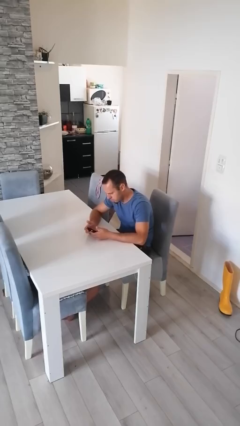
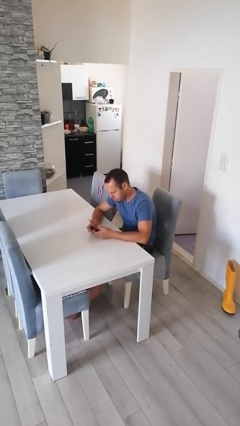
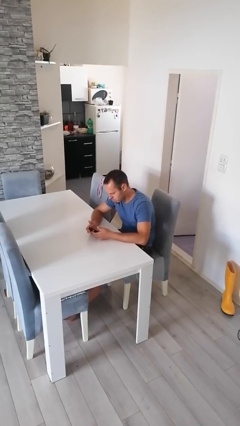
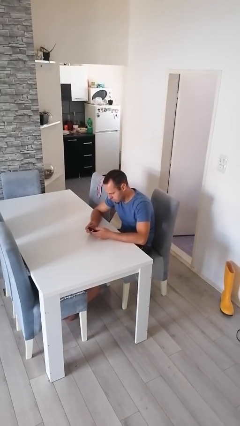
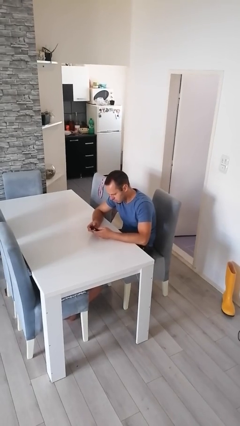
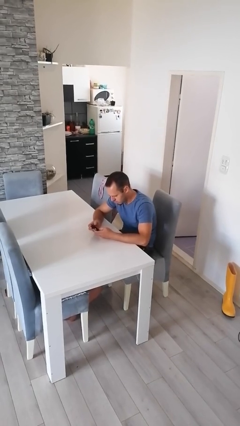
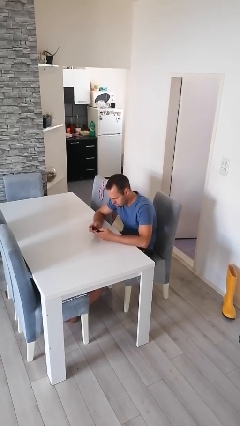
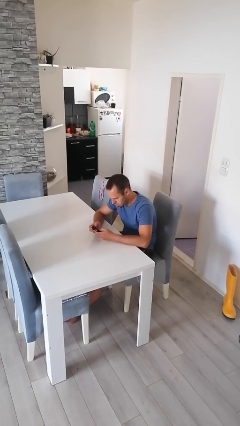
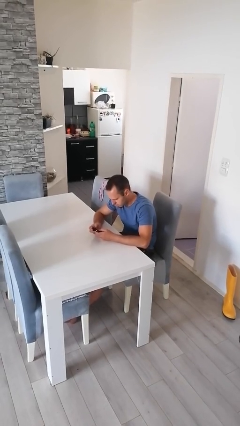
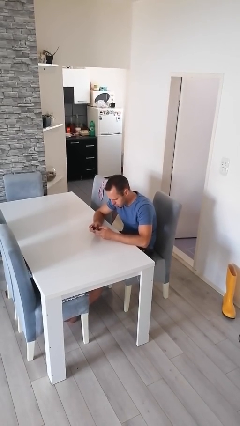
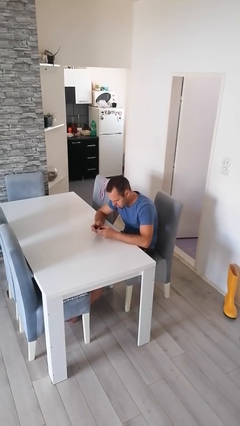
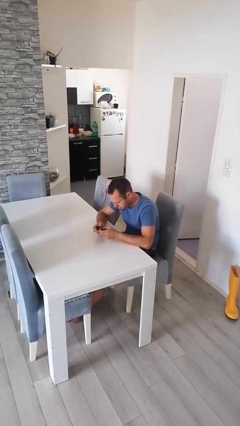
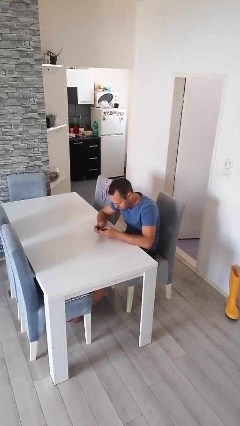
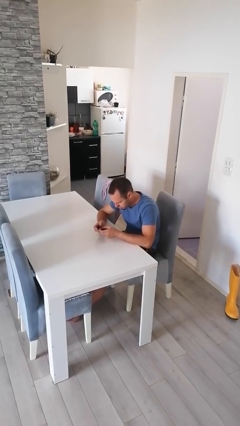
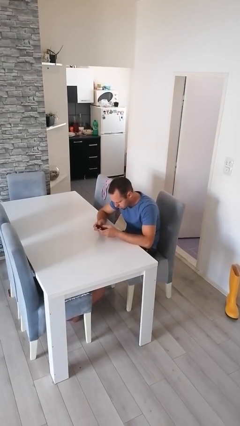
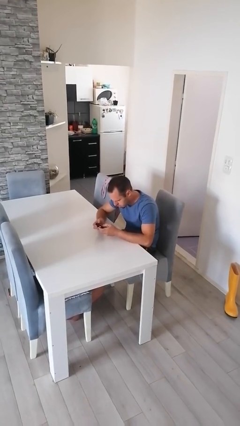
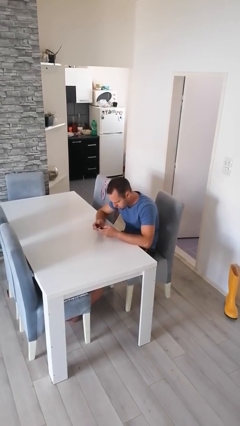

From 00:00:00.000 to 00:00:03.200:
person interacts with handheld game

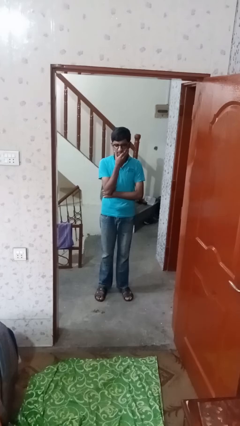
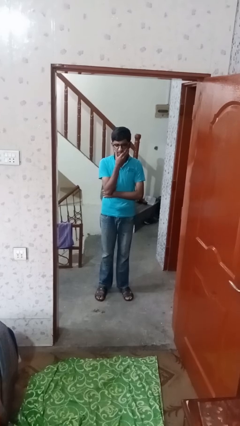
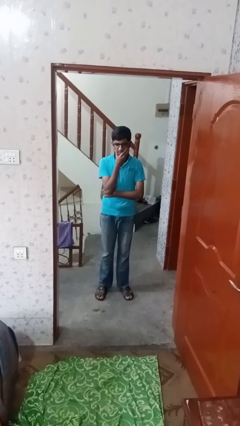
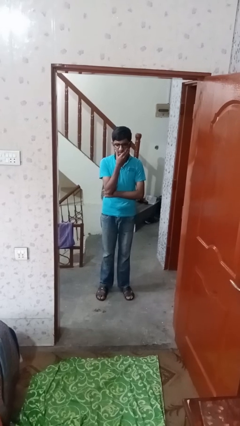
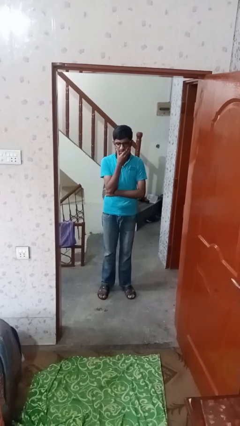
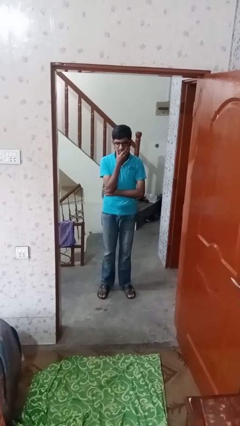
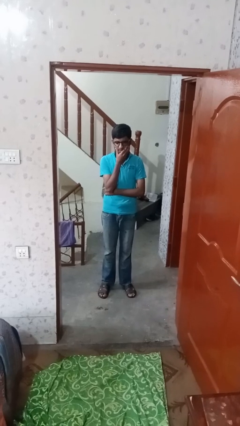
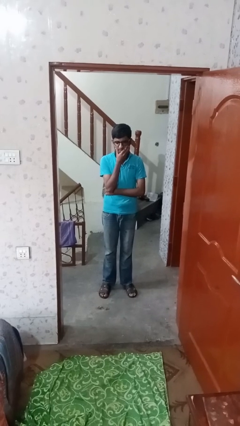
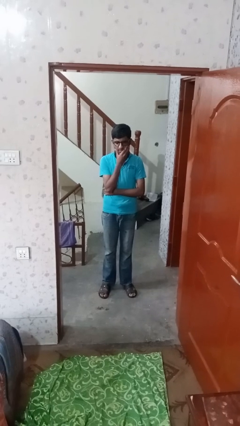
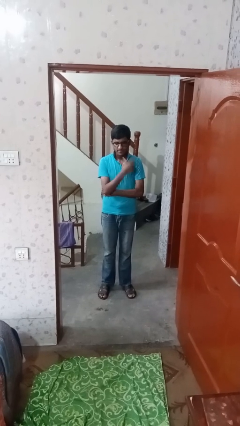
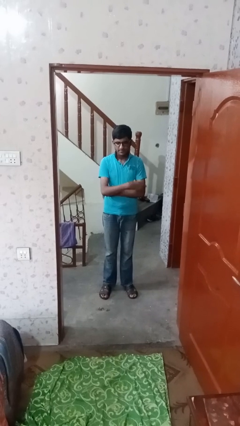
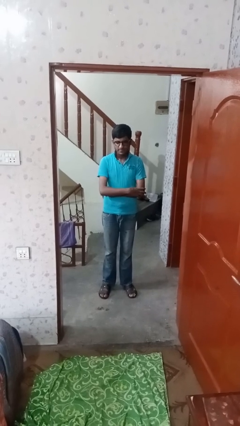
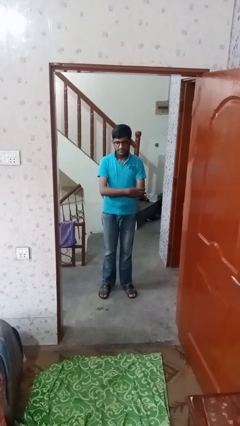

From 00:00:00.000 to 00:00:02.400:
person strokes chin

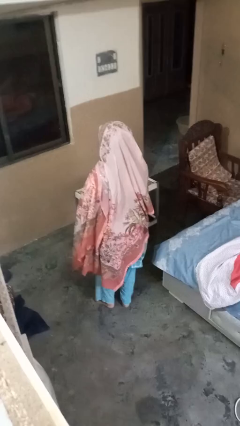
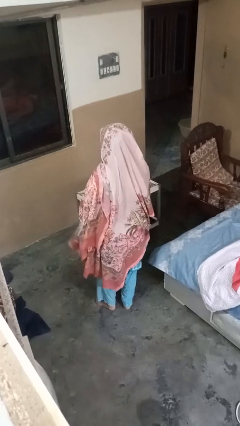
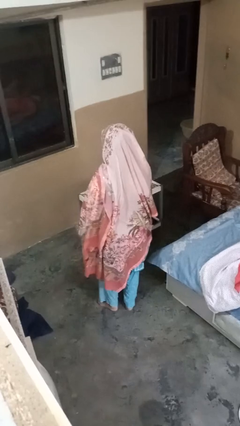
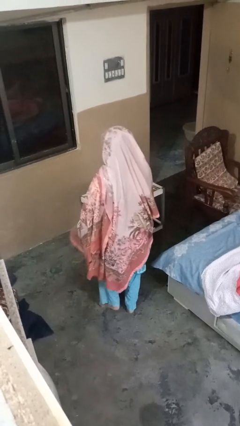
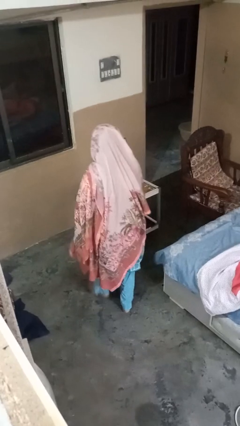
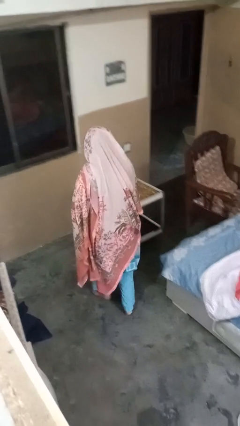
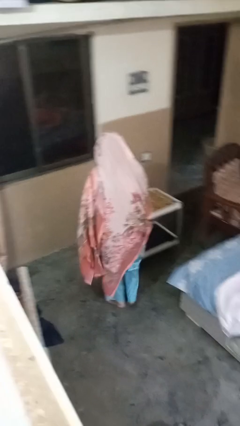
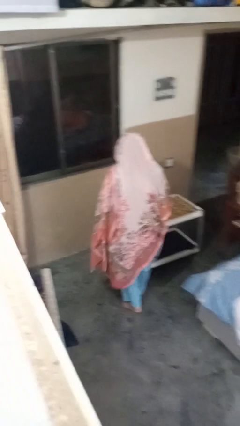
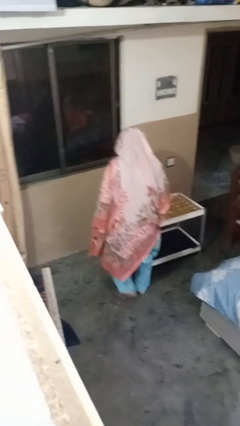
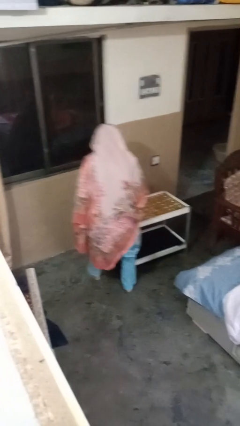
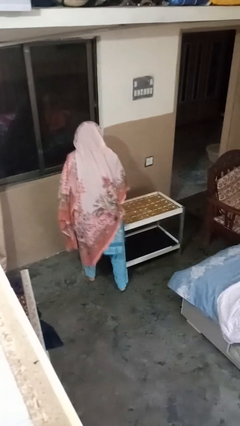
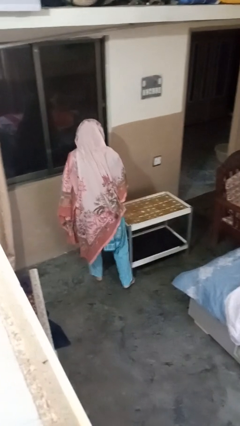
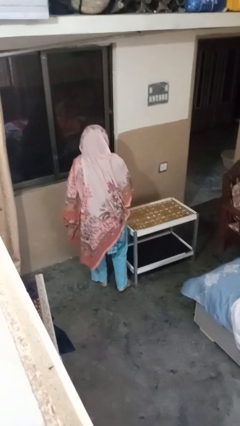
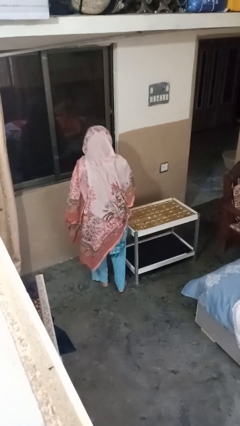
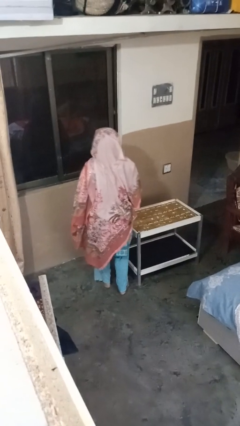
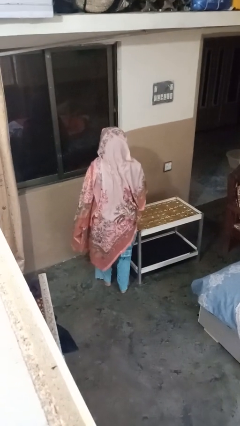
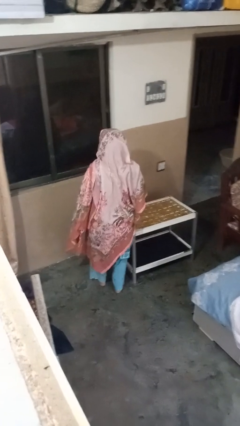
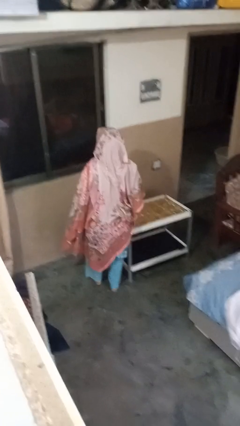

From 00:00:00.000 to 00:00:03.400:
person bumps into table

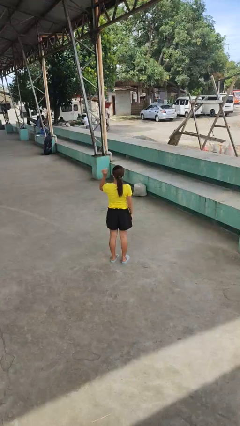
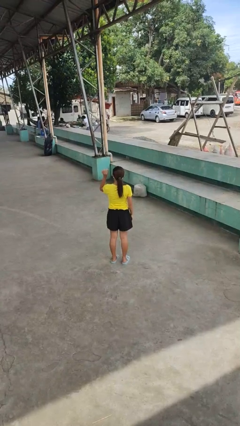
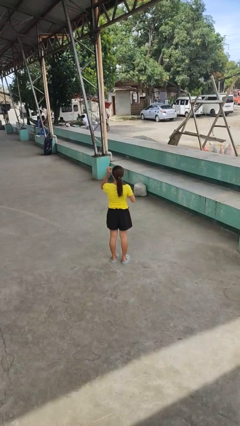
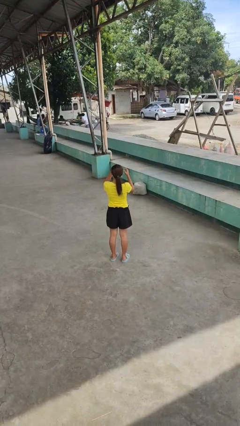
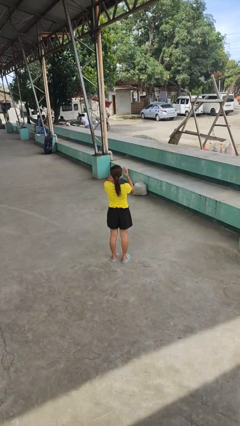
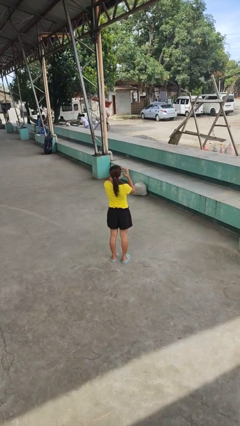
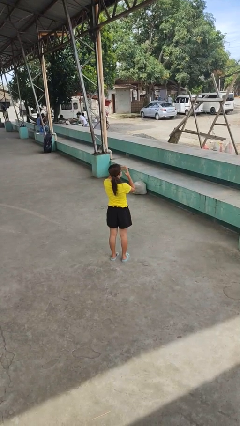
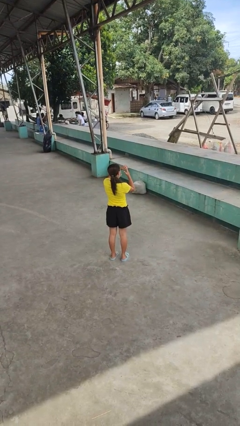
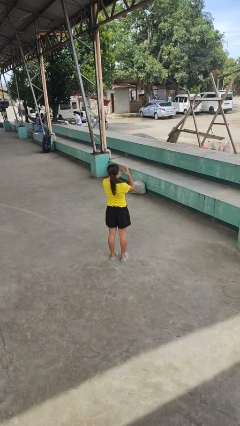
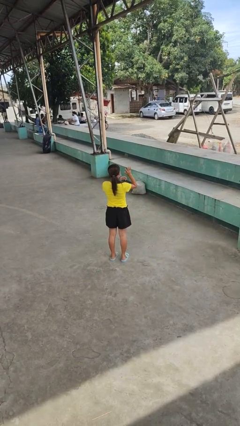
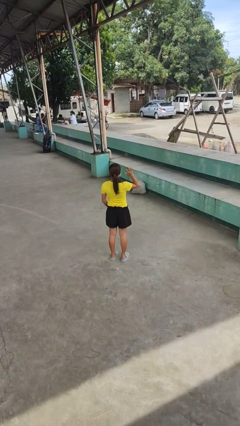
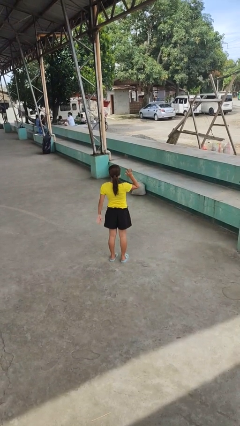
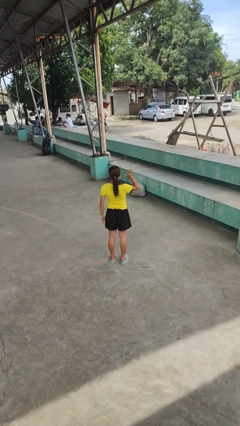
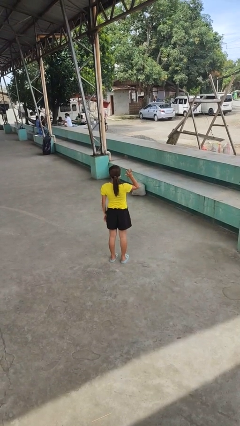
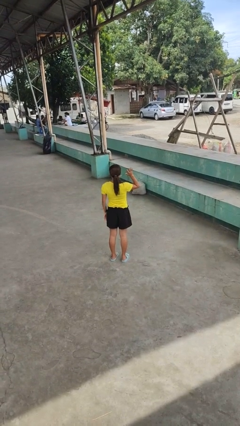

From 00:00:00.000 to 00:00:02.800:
person puts on ring

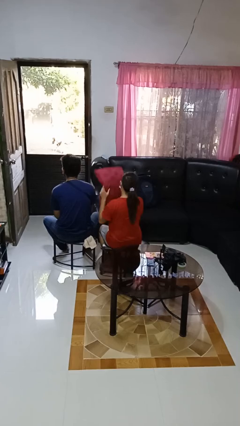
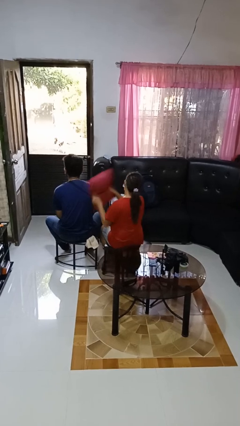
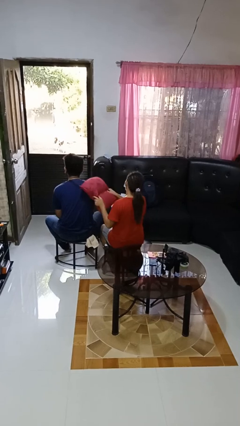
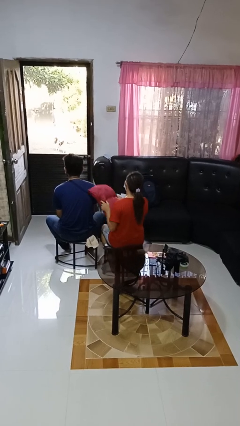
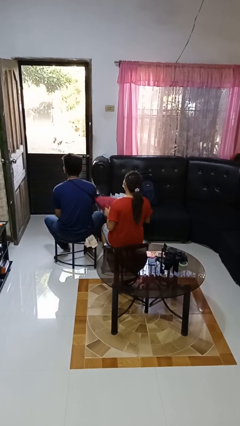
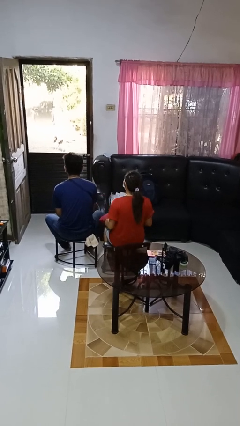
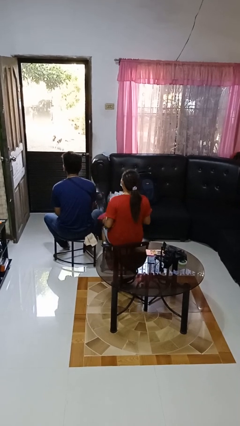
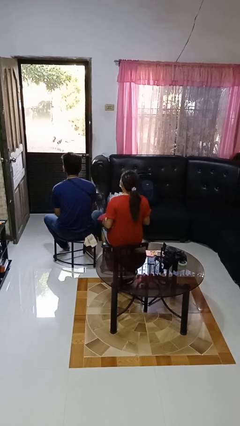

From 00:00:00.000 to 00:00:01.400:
person hits person with pillow

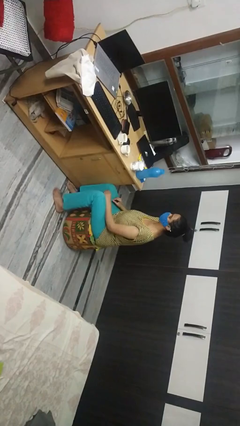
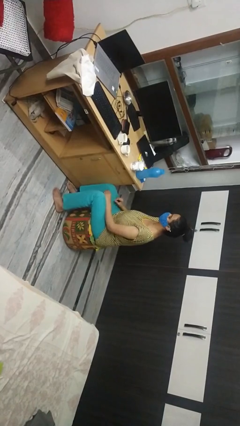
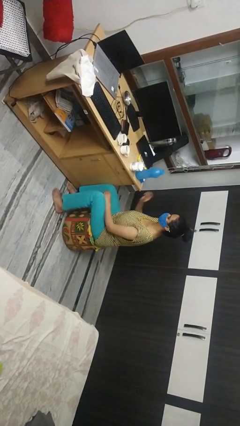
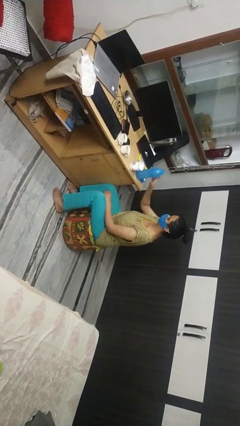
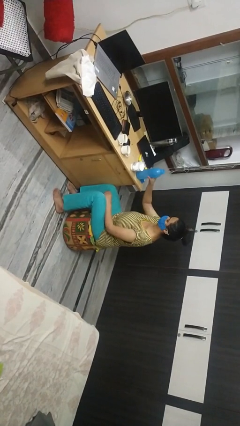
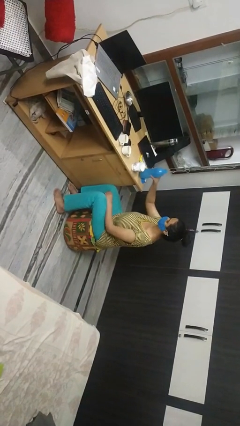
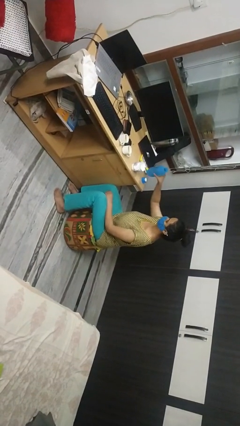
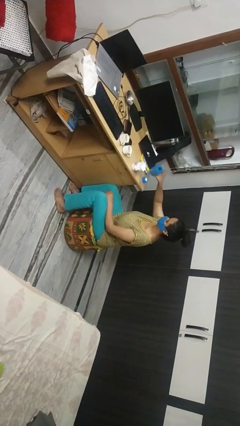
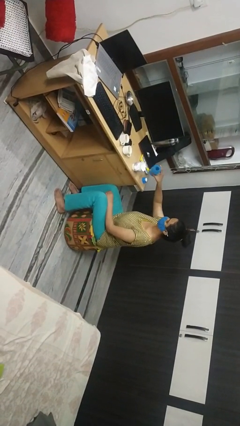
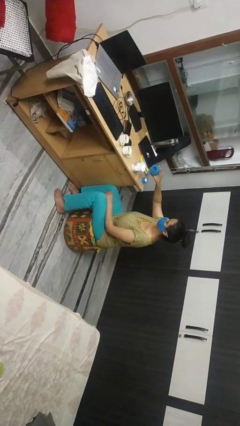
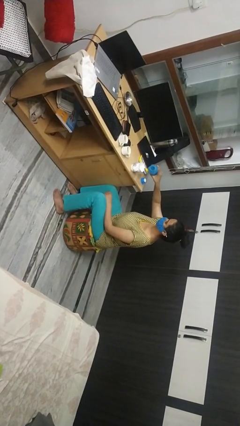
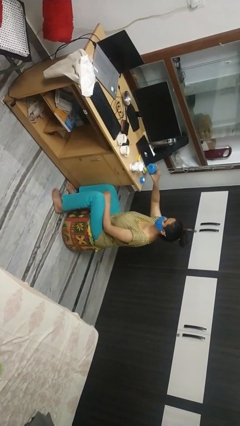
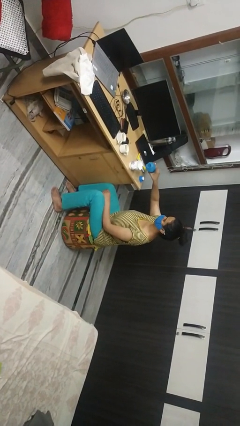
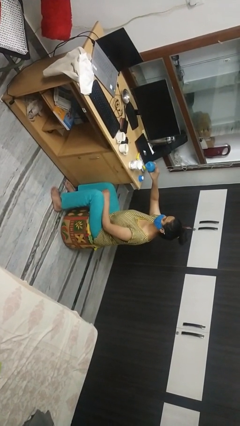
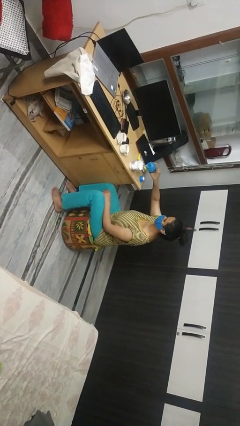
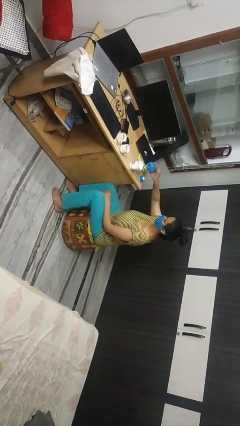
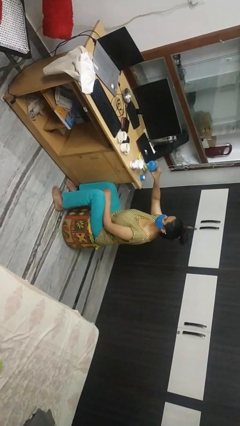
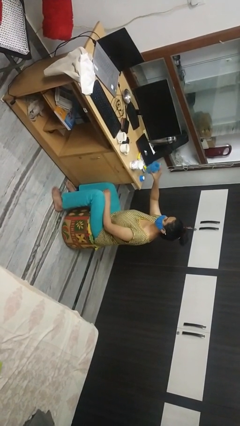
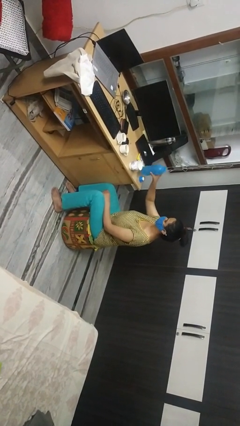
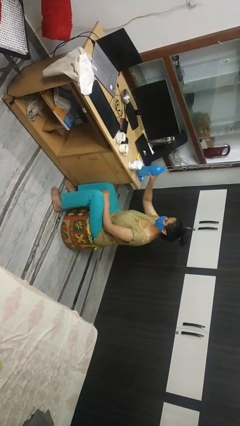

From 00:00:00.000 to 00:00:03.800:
person pours liquid into cup

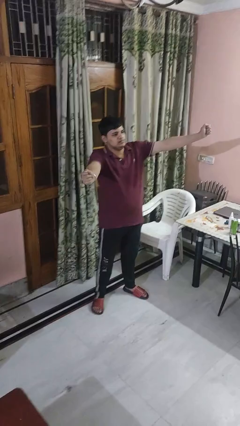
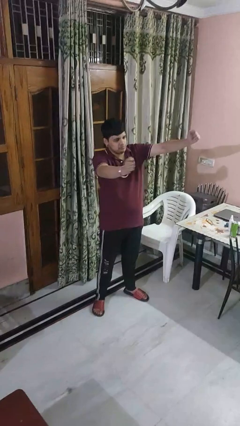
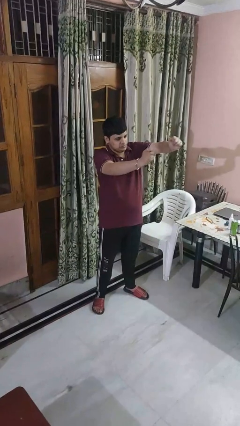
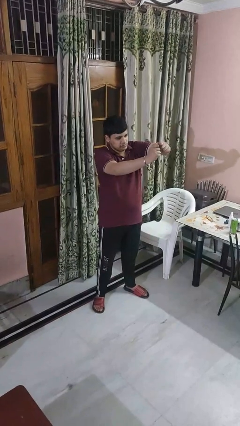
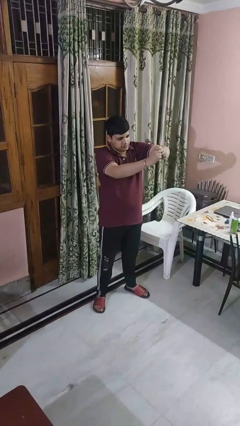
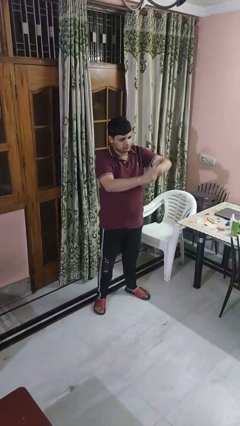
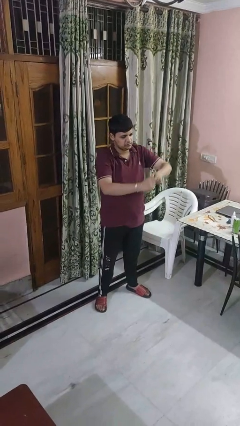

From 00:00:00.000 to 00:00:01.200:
person gestures zoom out
